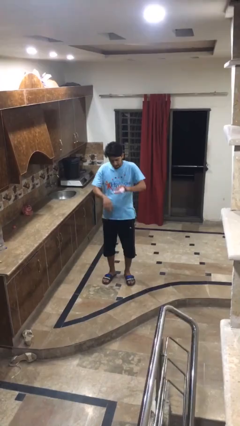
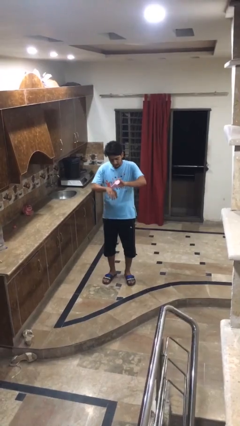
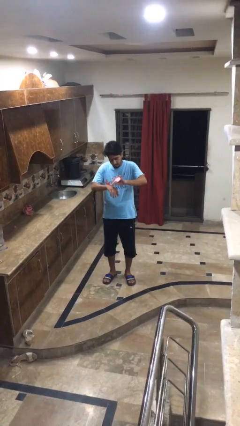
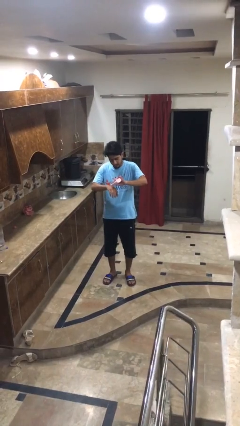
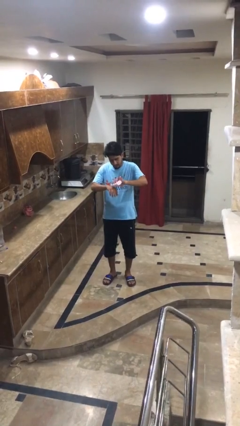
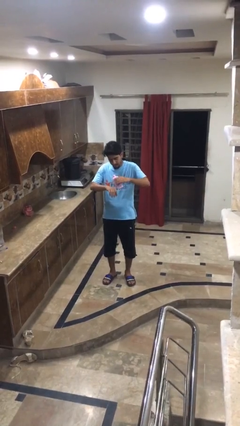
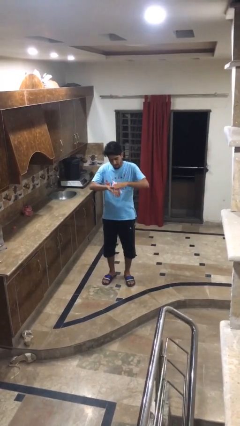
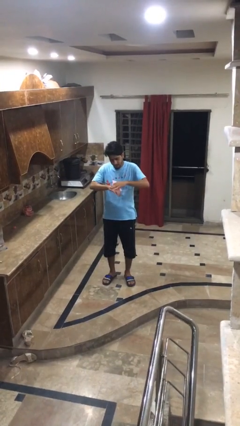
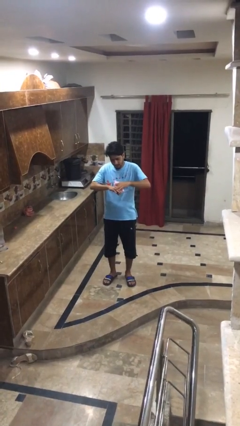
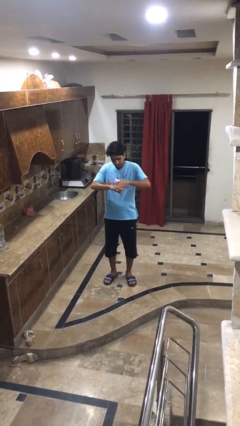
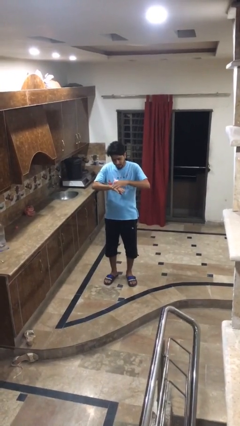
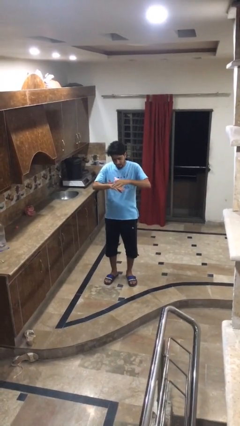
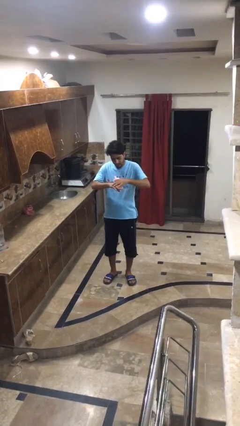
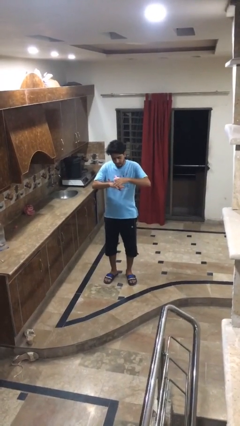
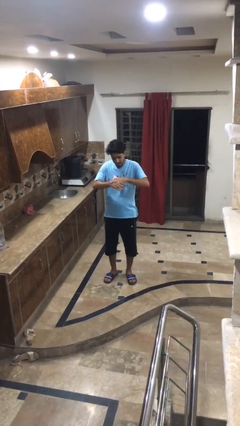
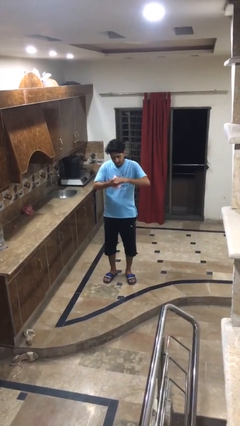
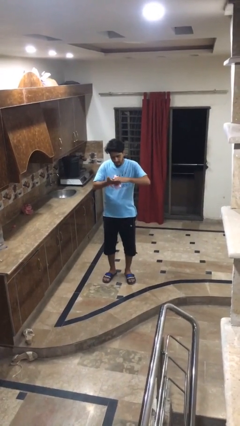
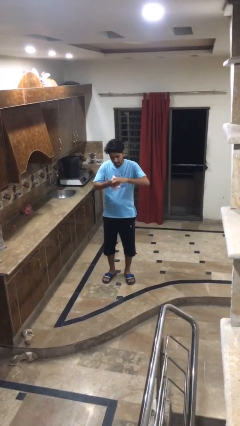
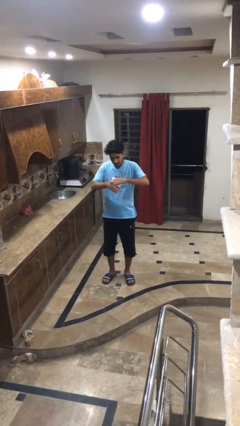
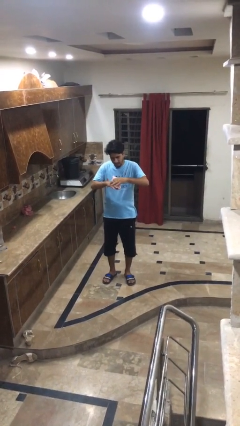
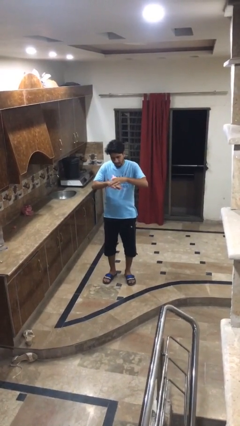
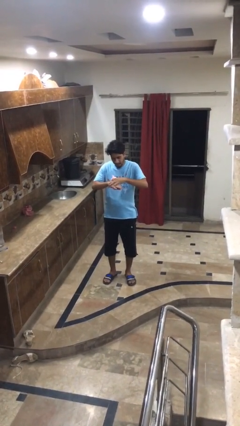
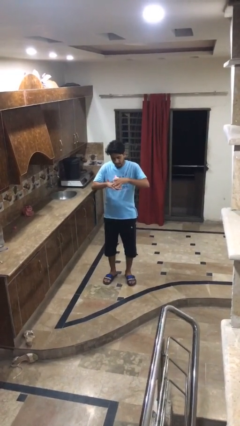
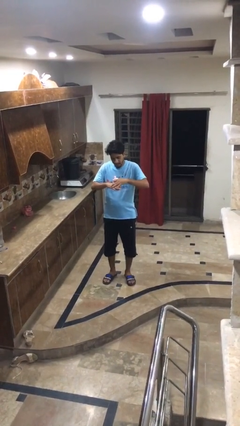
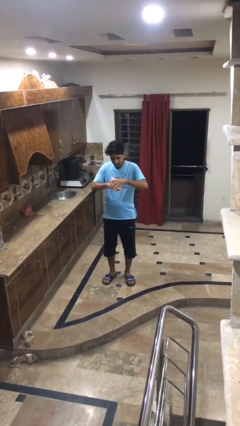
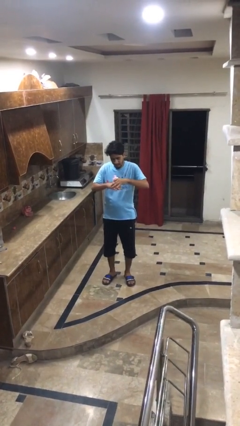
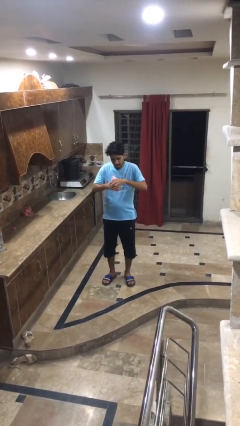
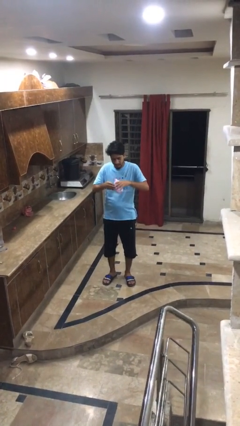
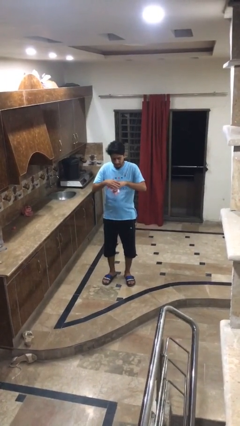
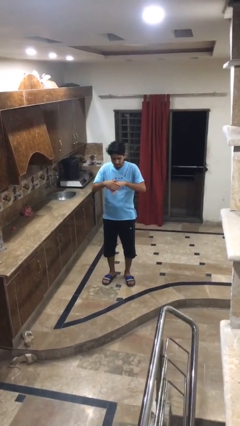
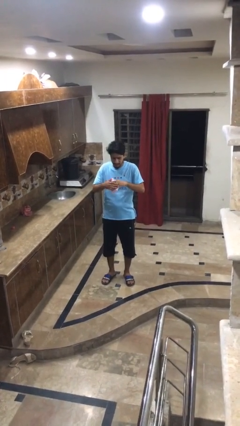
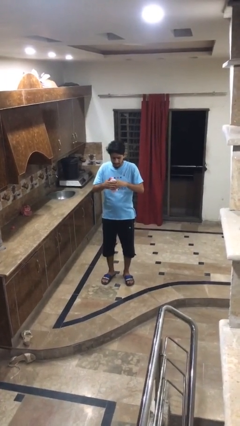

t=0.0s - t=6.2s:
person applies sunscreen

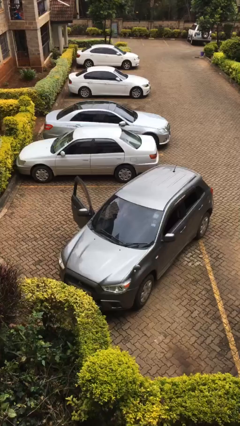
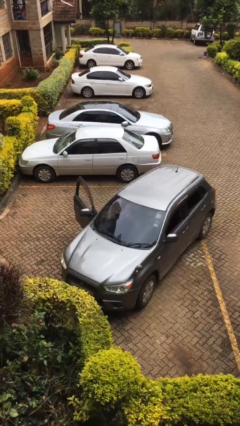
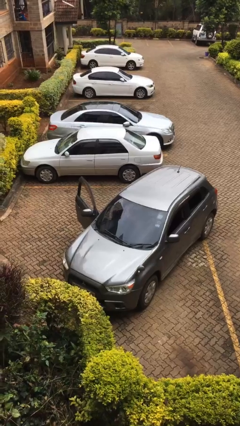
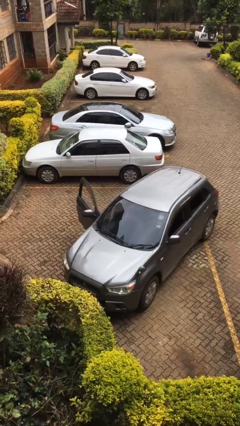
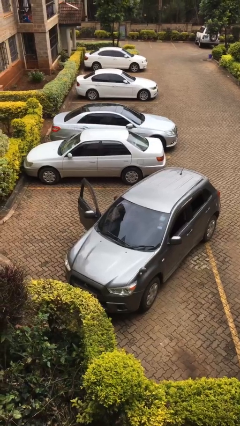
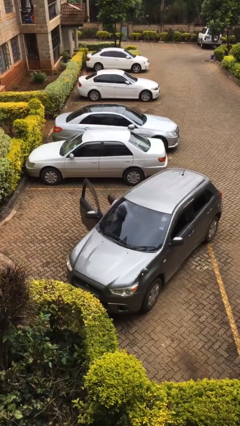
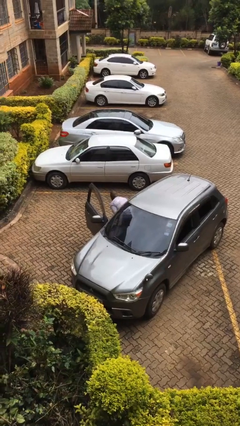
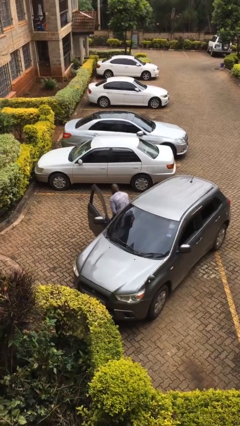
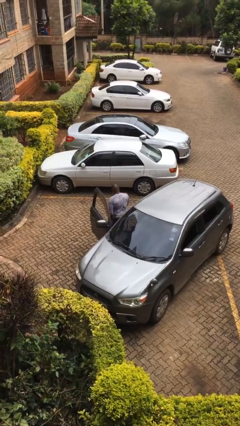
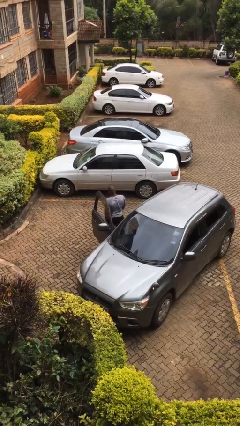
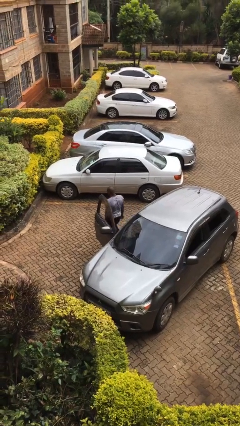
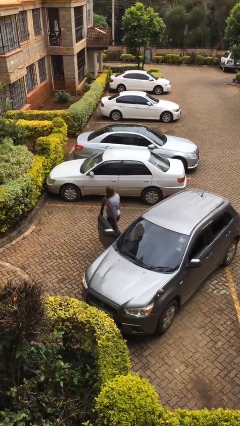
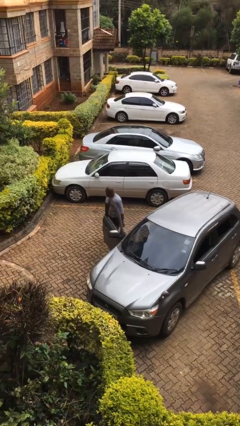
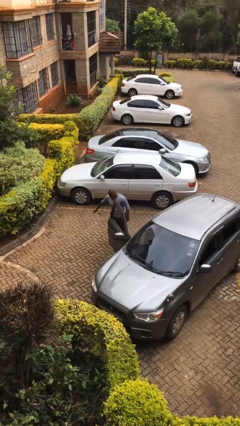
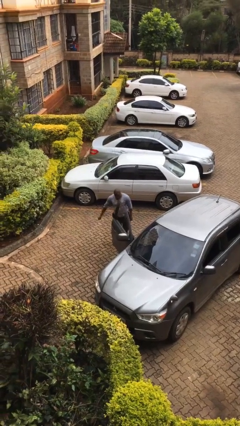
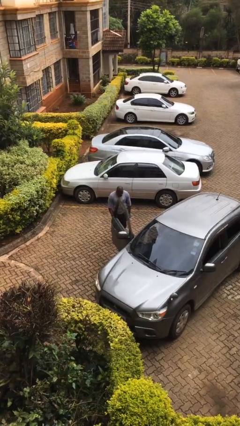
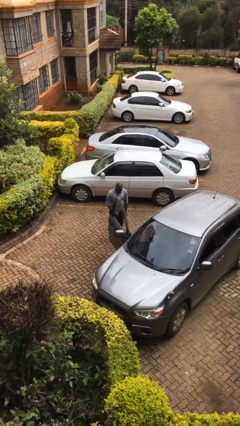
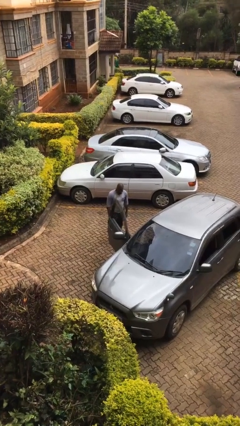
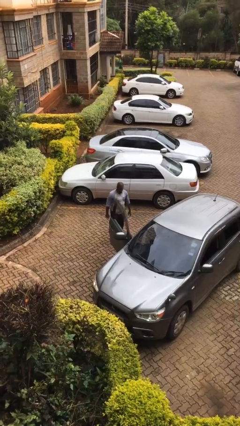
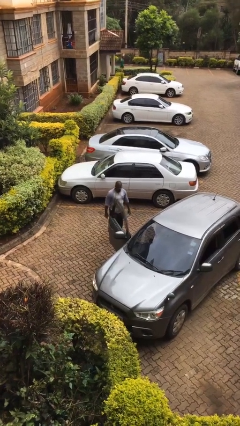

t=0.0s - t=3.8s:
person exits car

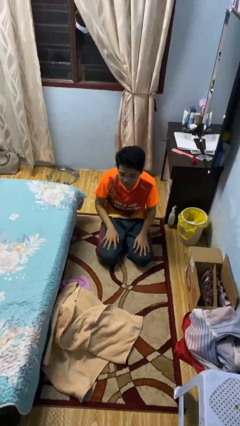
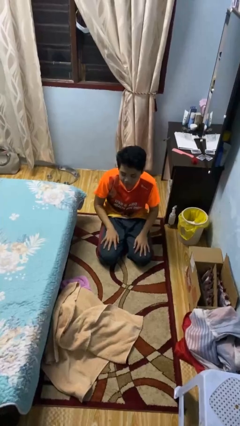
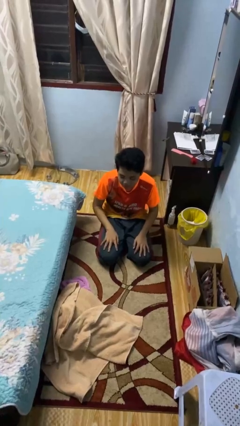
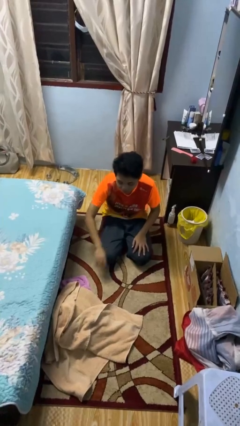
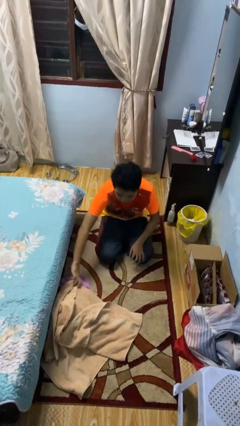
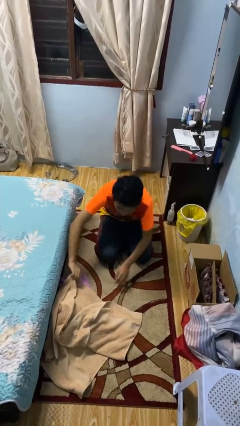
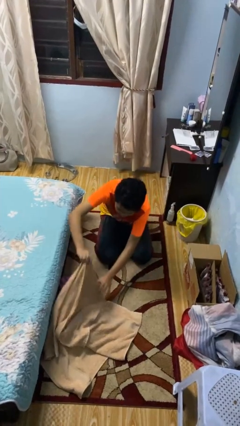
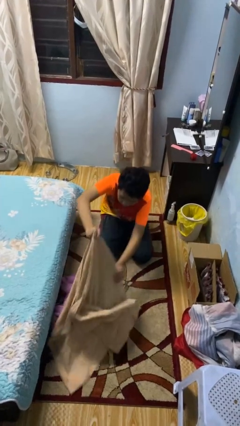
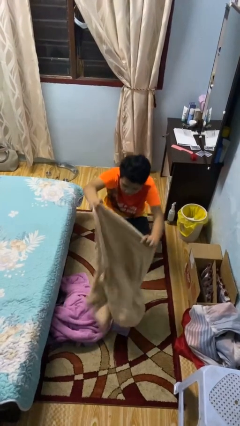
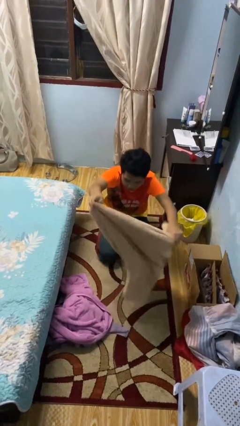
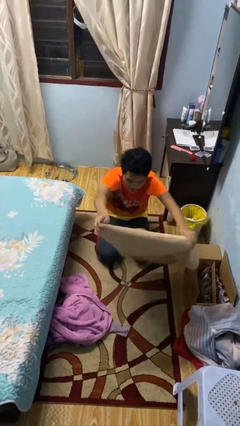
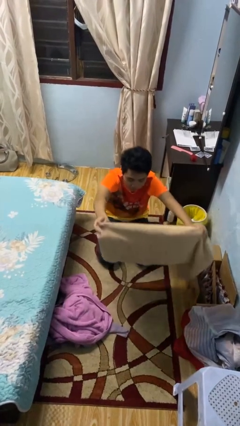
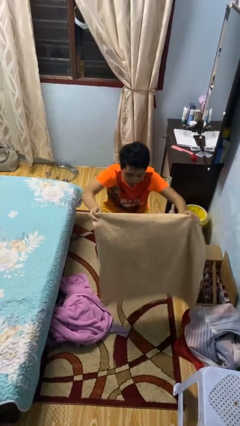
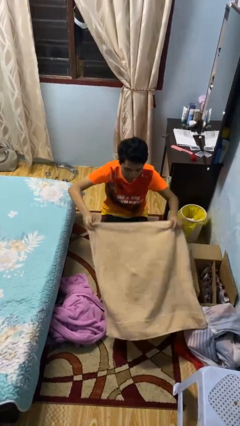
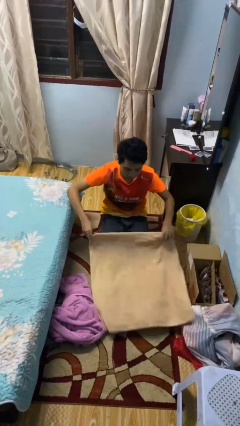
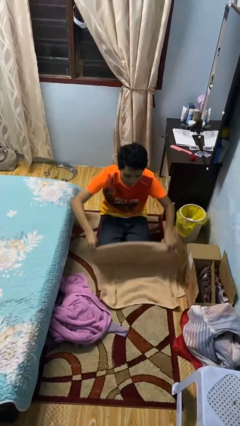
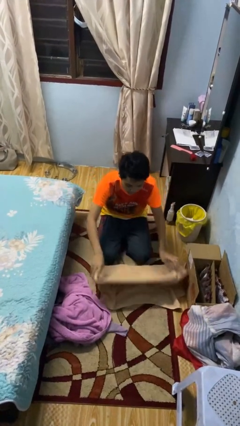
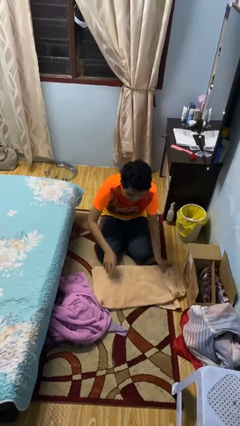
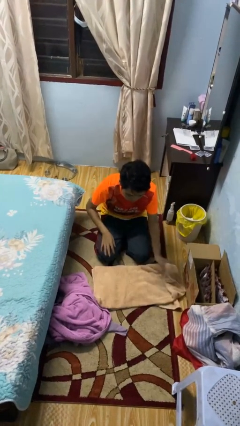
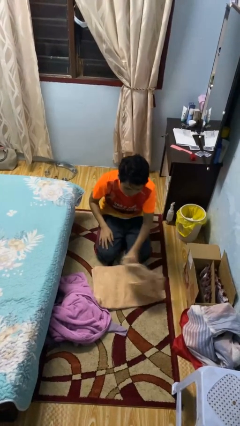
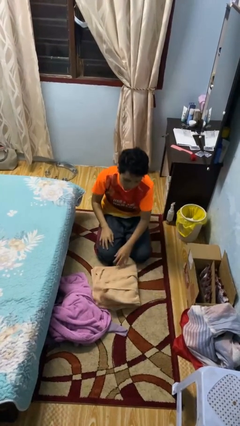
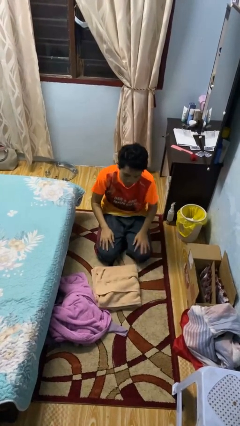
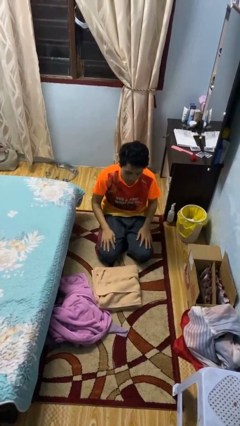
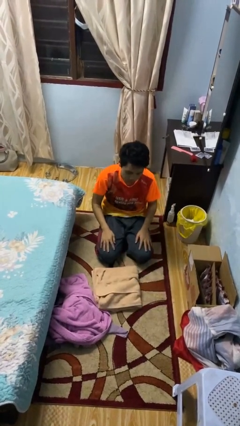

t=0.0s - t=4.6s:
person folds towel

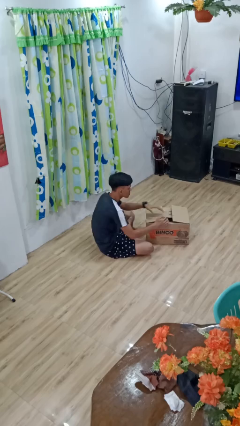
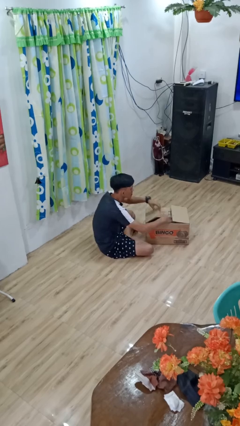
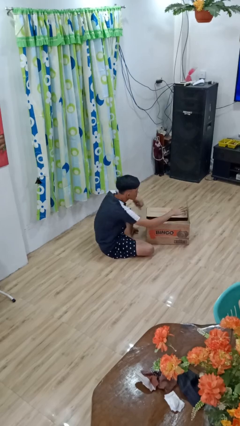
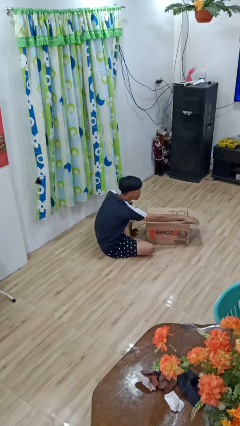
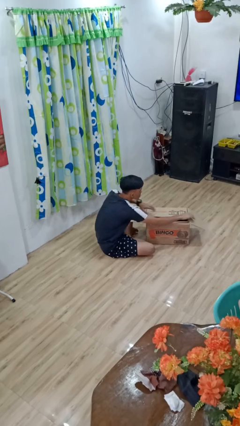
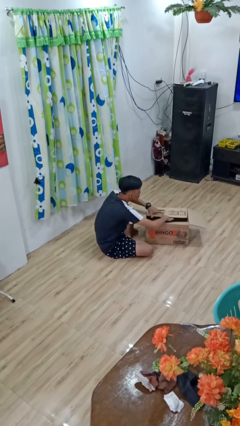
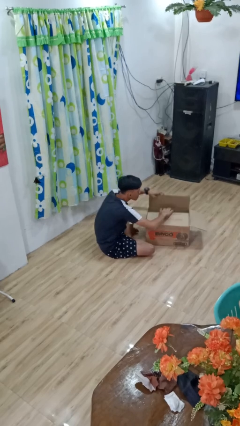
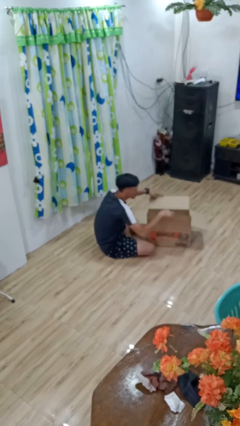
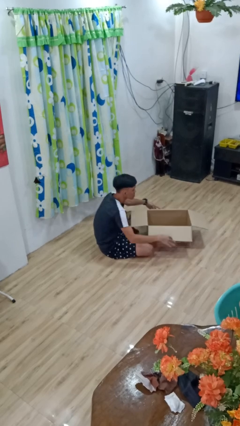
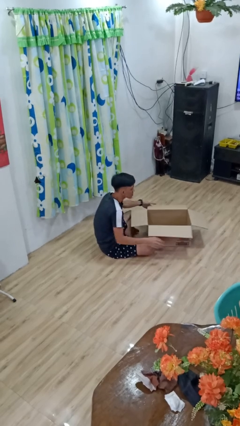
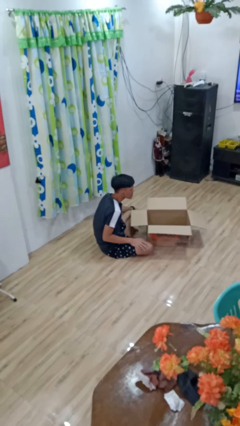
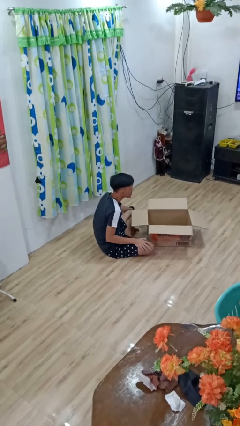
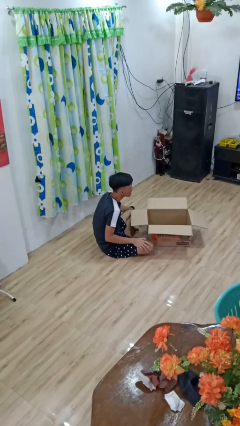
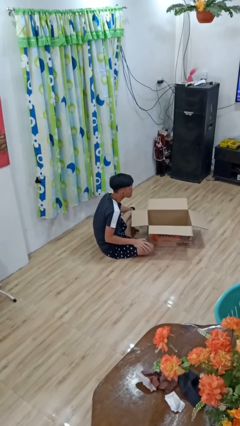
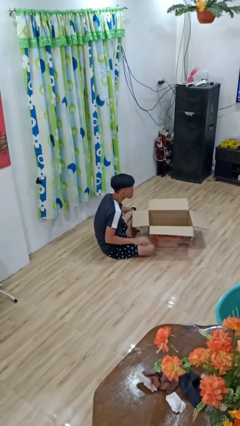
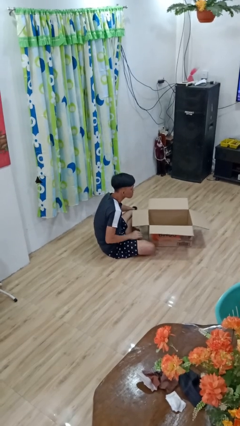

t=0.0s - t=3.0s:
person opens box

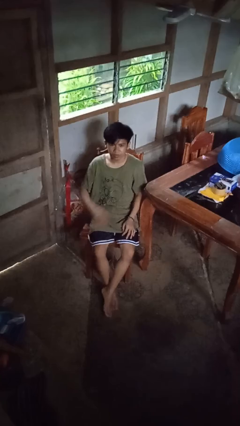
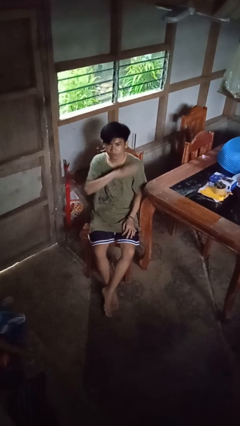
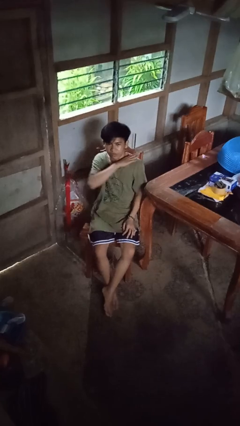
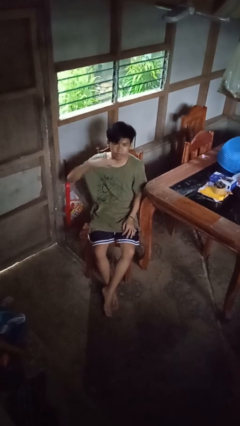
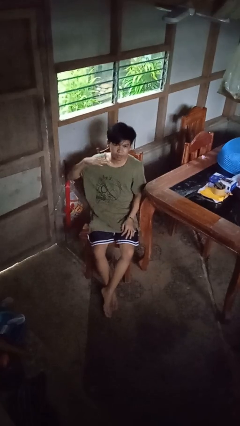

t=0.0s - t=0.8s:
person gestures cut
